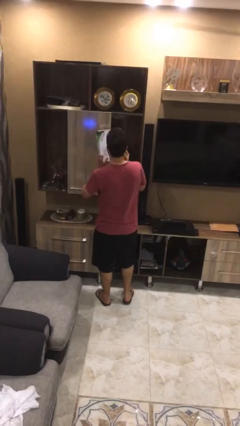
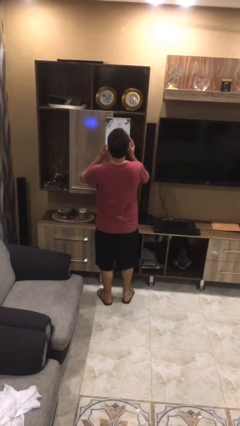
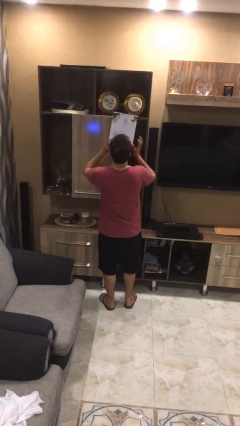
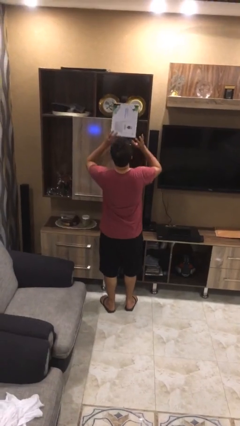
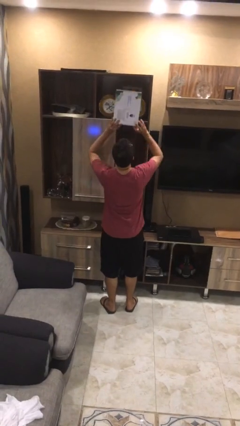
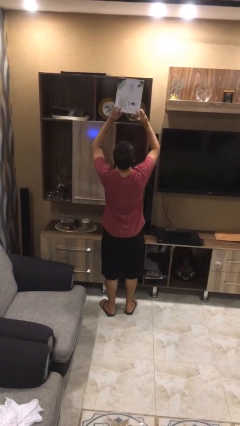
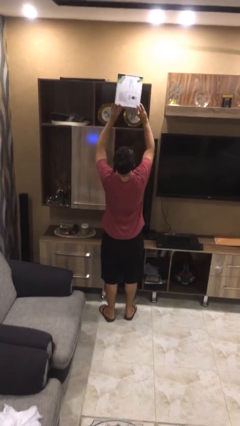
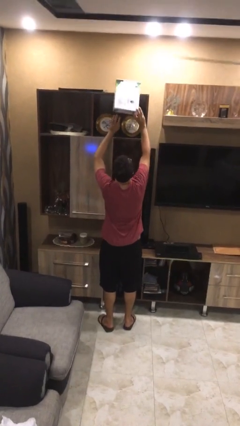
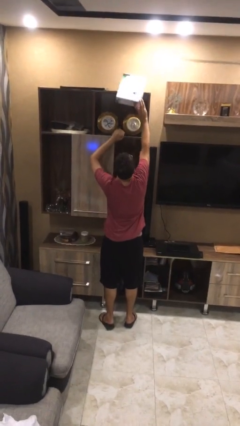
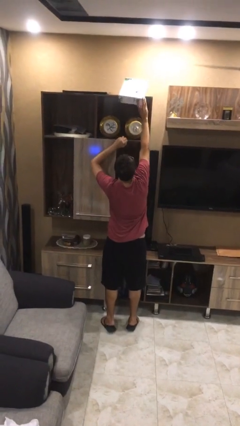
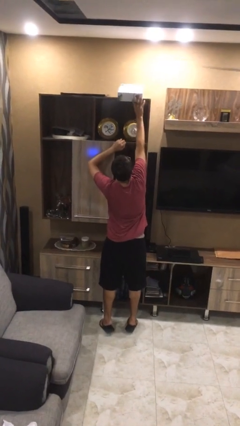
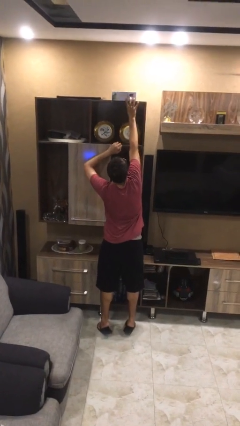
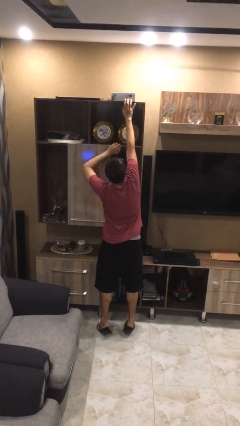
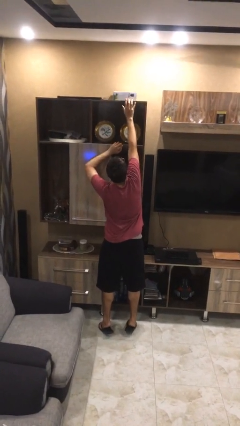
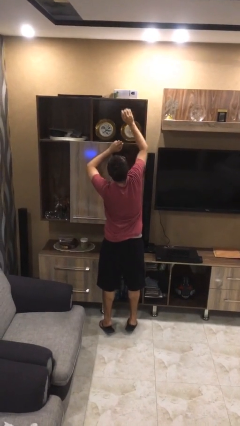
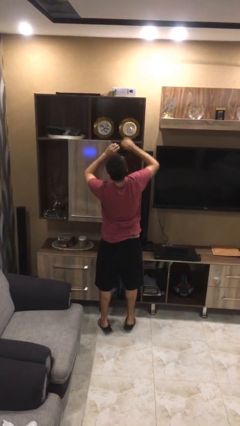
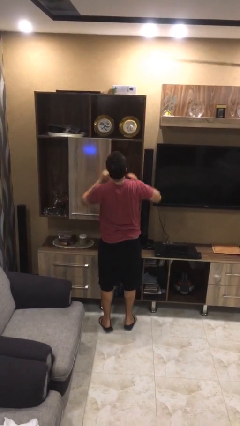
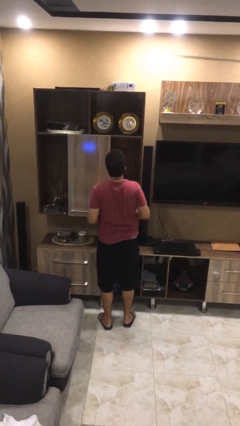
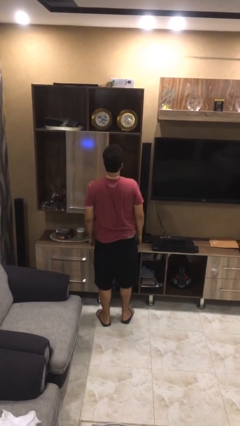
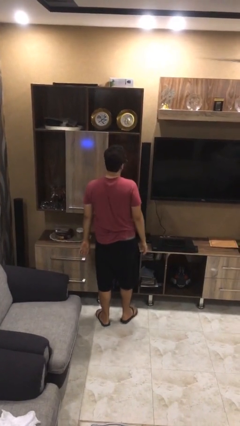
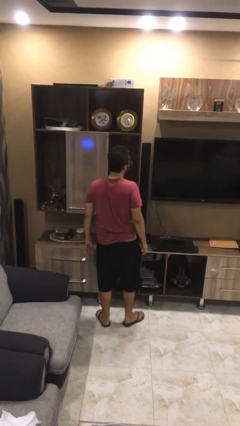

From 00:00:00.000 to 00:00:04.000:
person puts down object on shelf

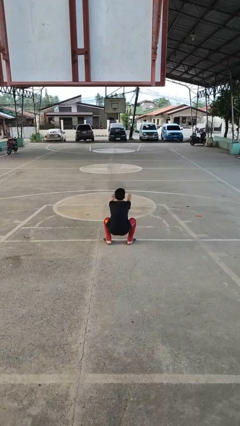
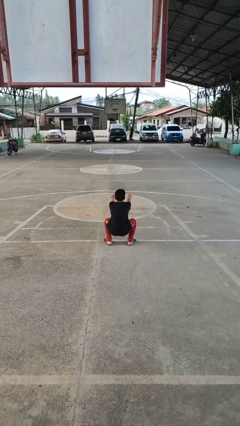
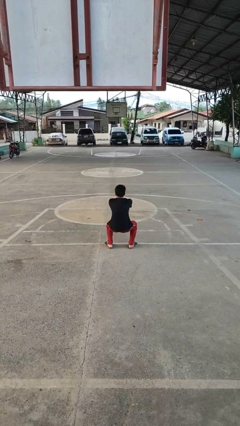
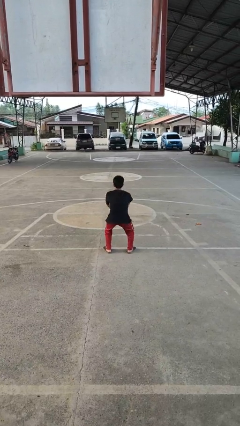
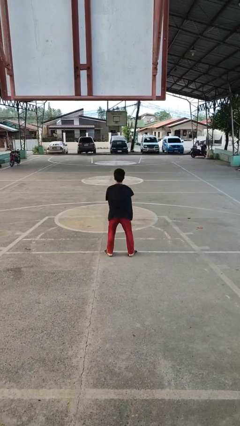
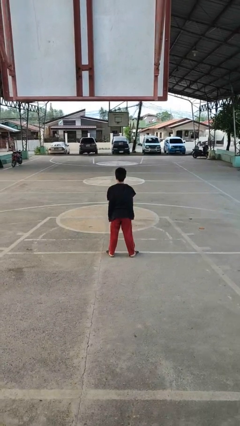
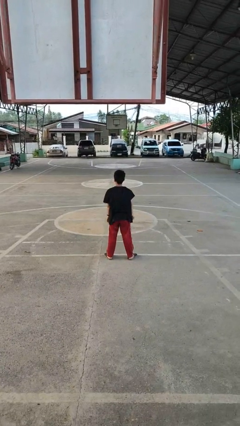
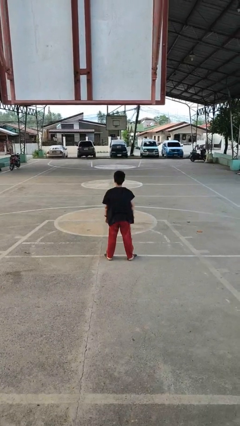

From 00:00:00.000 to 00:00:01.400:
person stands up

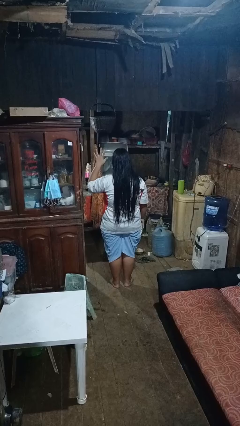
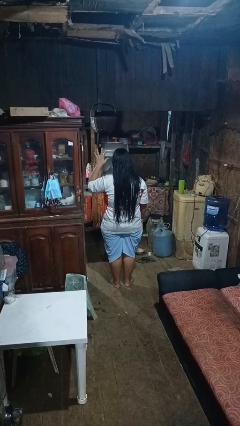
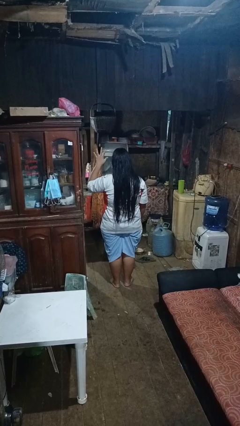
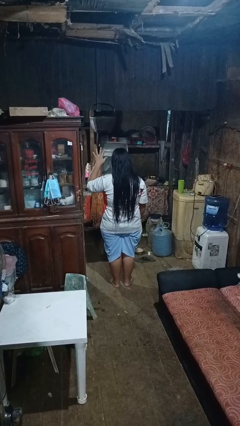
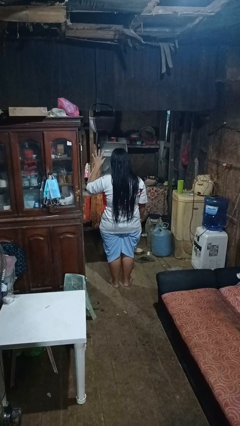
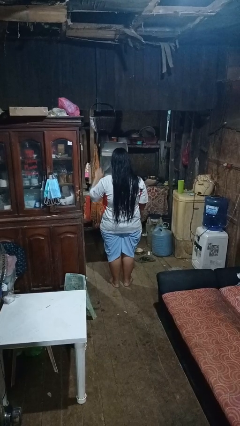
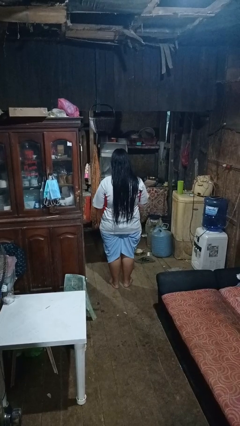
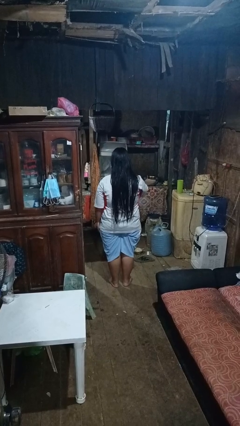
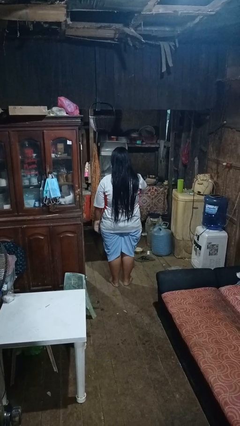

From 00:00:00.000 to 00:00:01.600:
person gestures number five

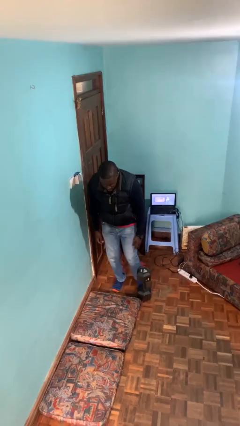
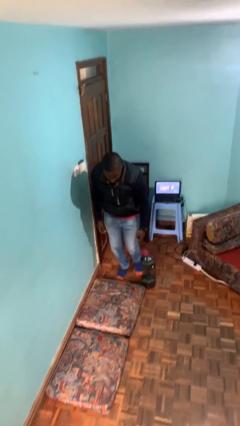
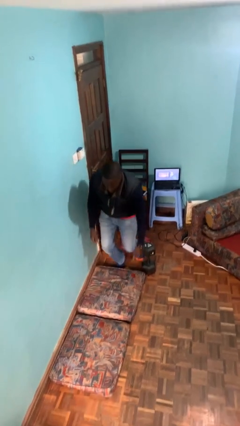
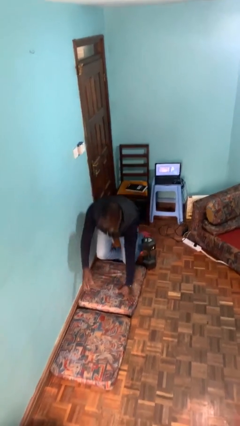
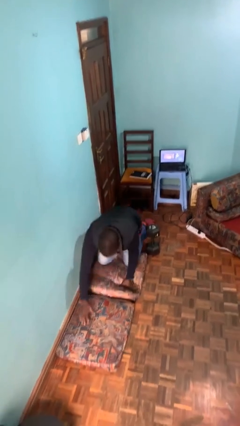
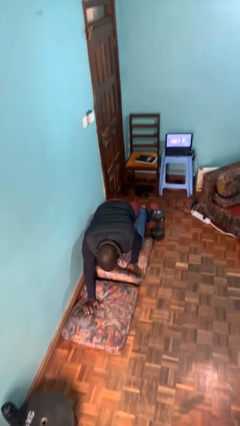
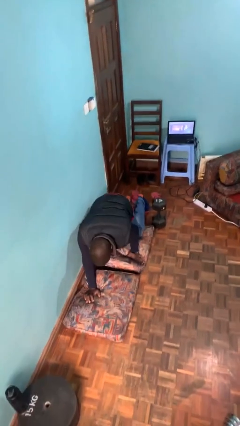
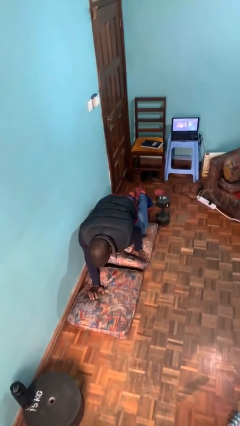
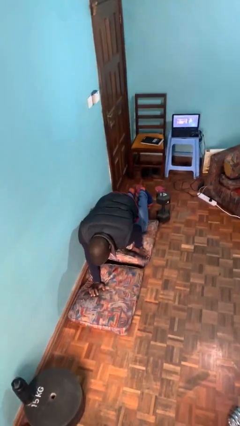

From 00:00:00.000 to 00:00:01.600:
person trips on object on floor

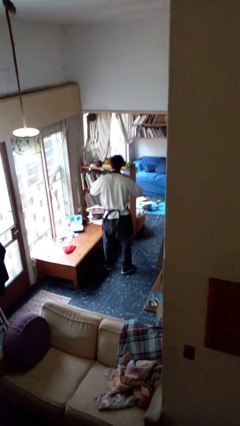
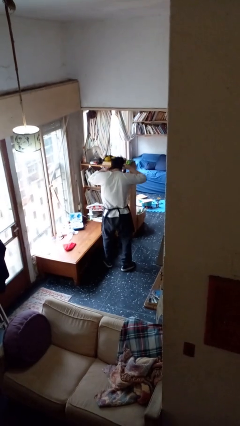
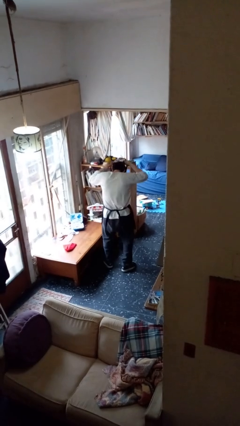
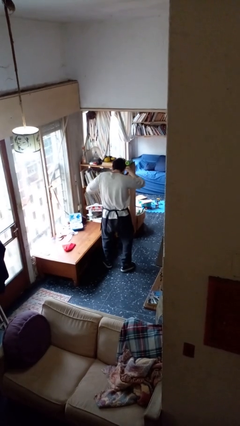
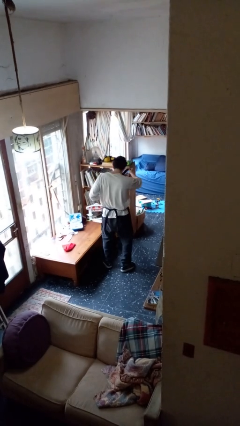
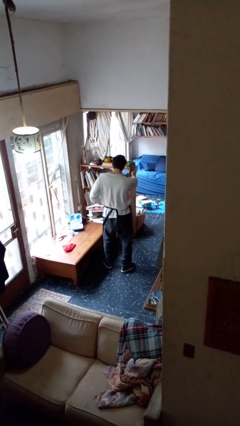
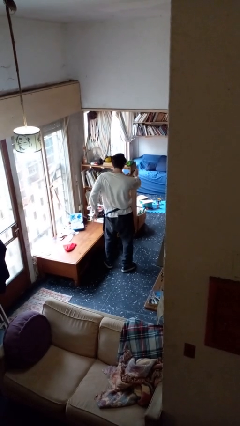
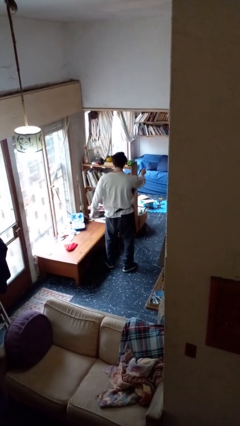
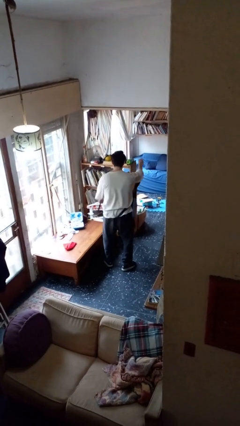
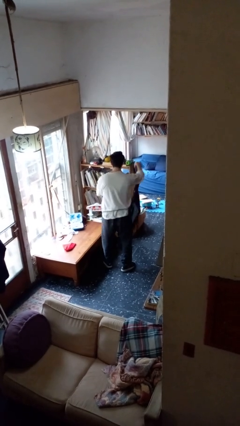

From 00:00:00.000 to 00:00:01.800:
person takes off apron

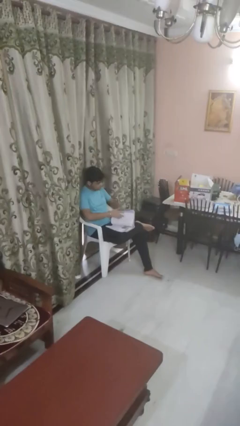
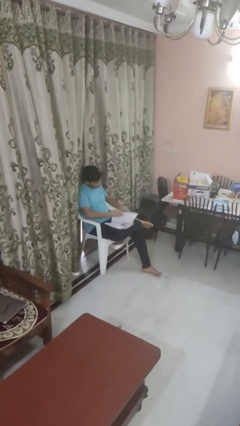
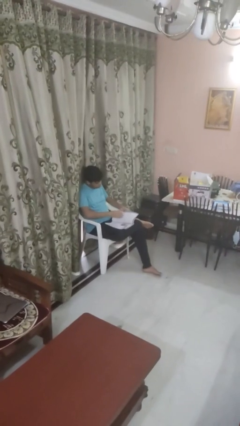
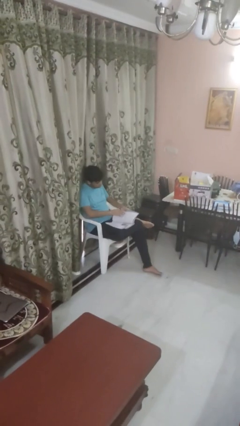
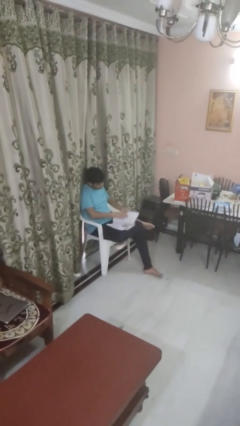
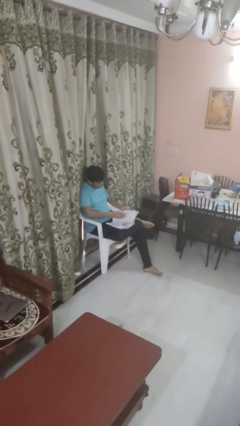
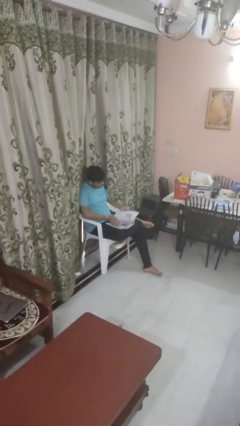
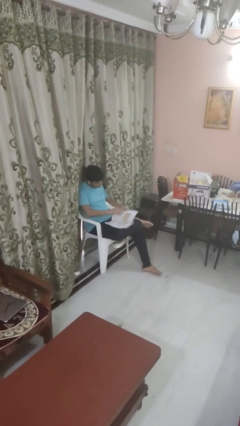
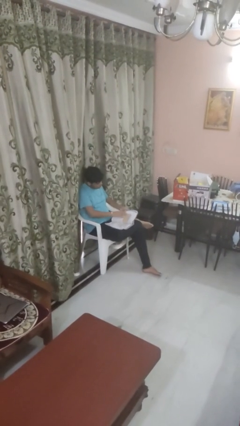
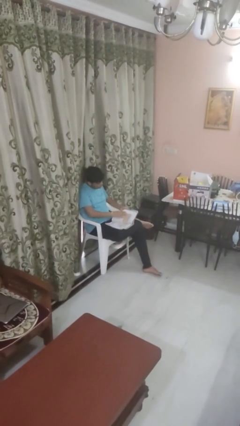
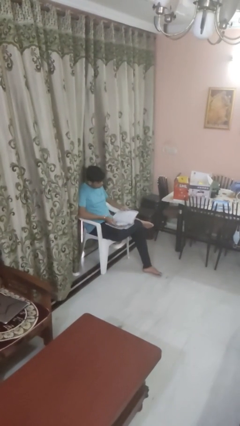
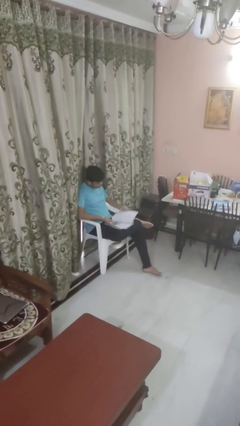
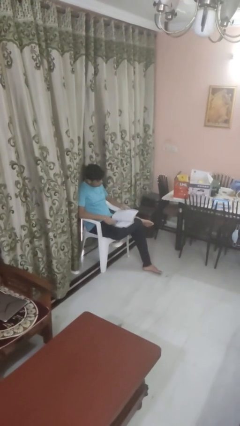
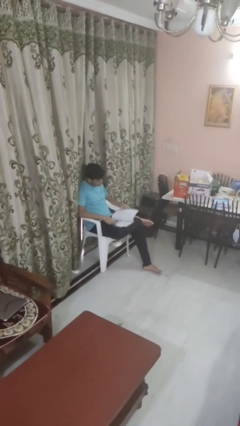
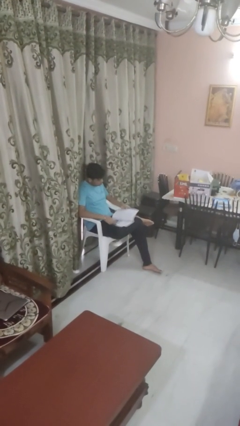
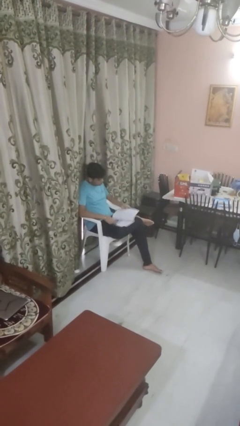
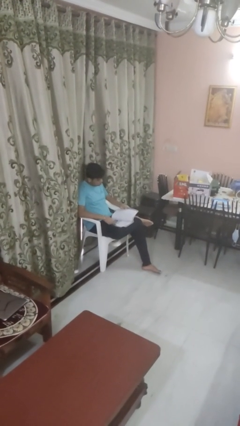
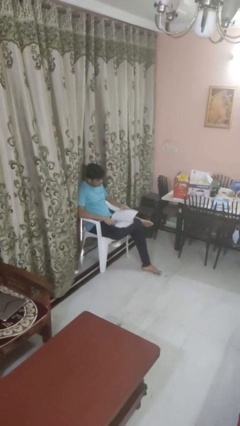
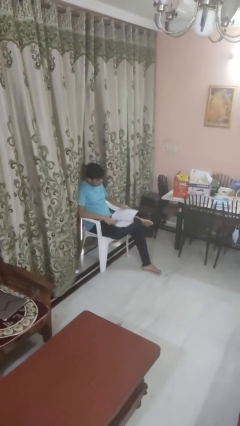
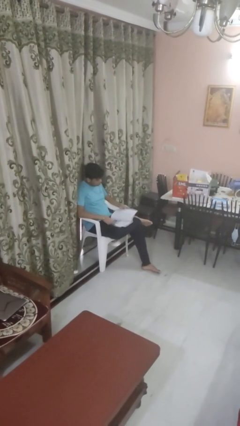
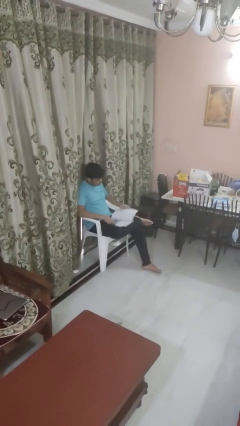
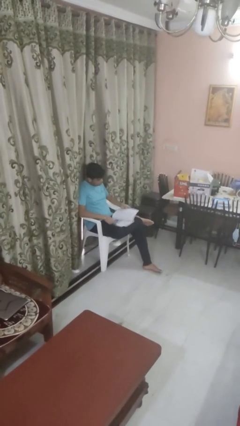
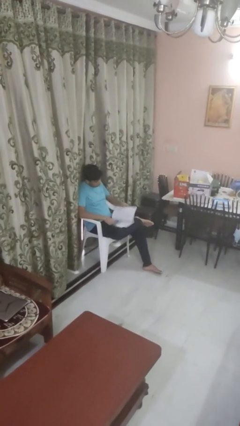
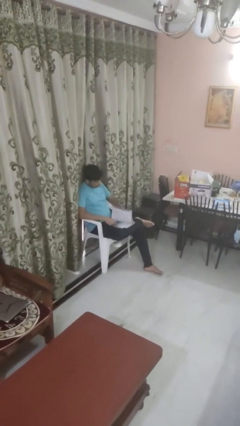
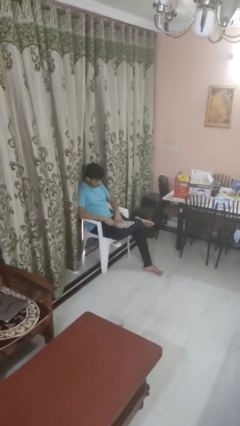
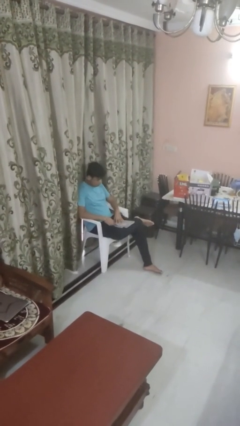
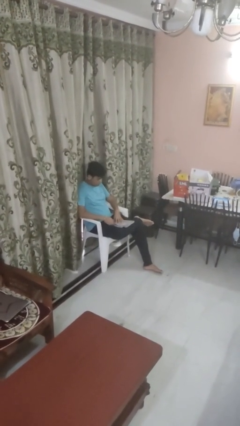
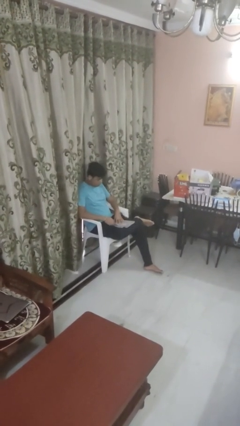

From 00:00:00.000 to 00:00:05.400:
person reads magazine

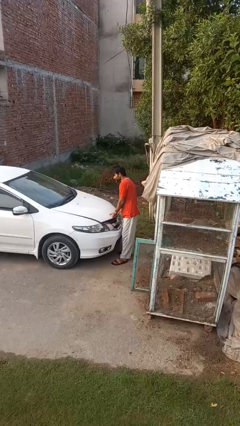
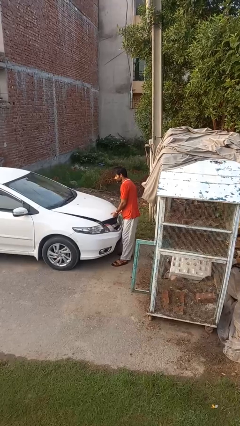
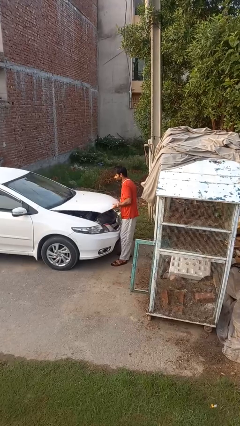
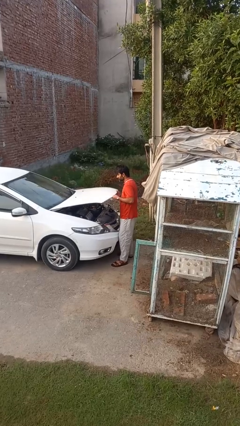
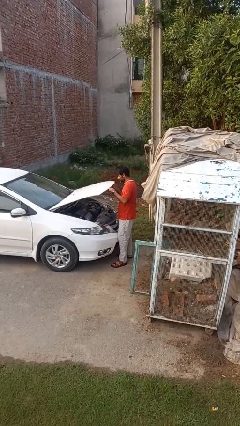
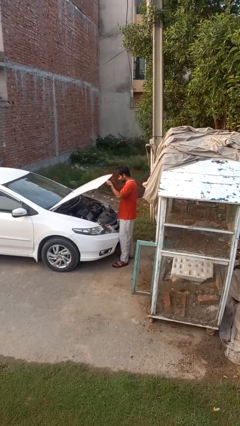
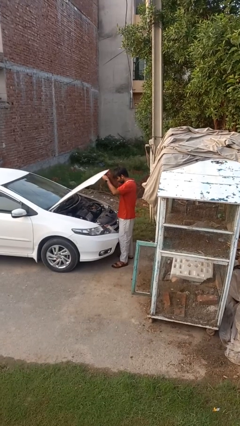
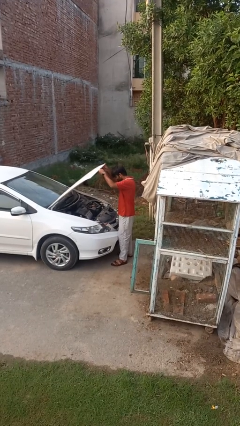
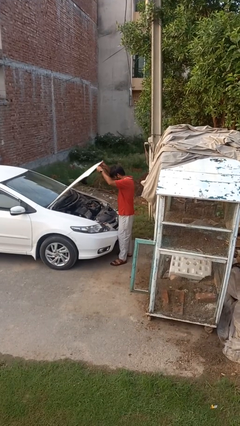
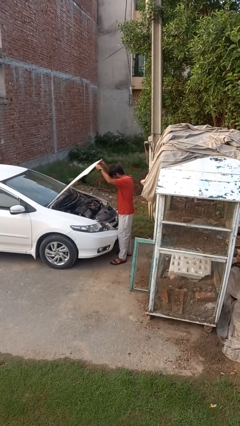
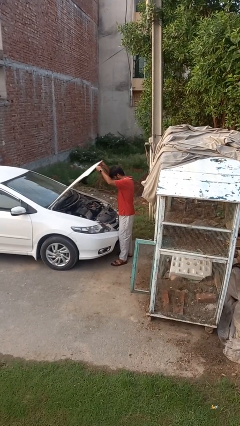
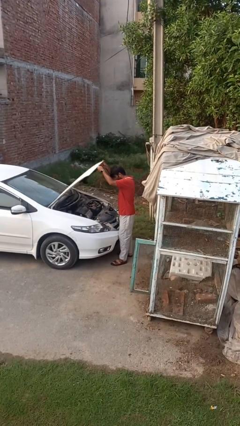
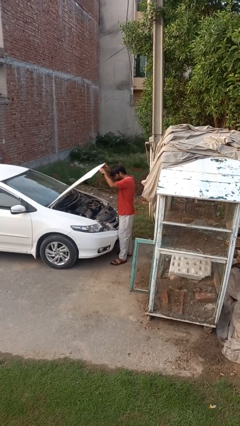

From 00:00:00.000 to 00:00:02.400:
person opens car hood
